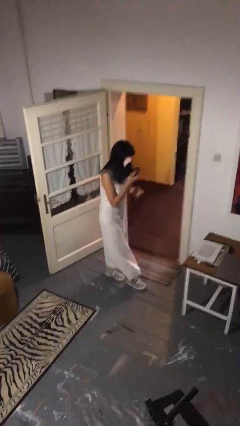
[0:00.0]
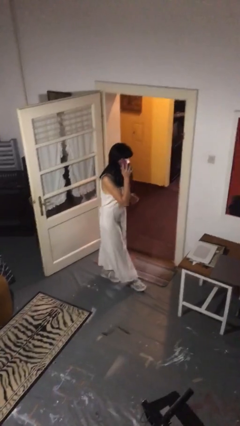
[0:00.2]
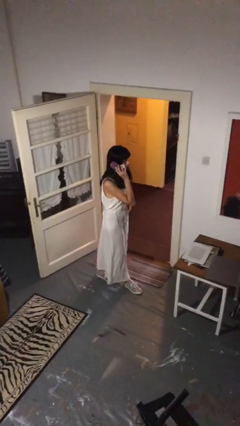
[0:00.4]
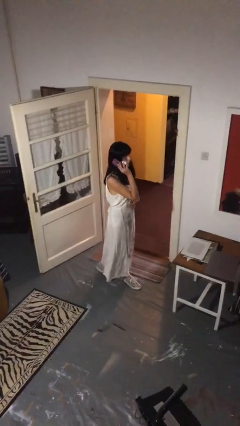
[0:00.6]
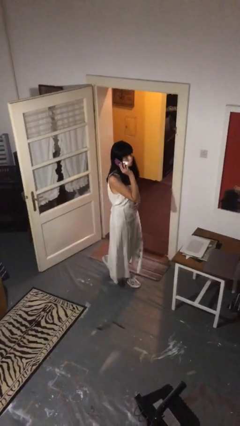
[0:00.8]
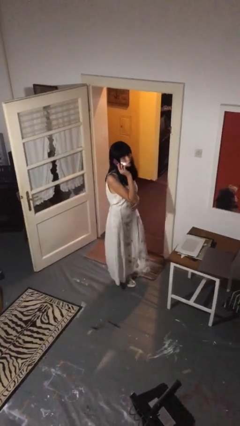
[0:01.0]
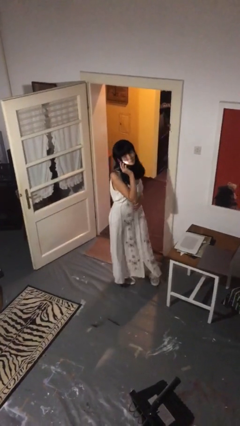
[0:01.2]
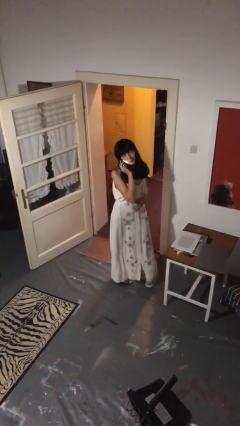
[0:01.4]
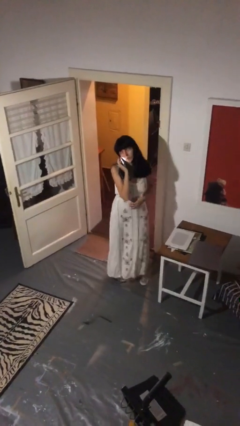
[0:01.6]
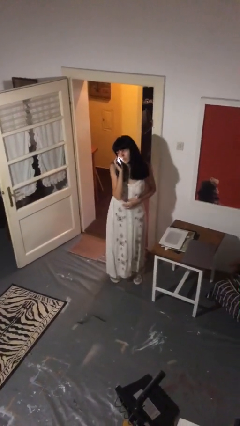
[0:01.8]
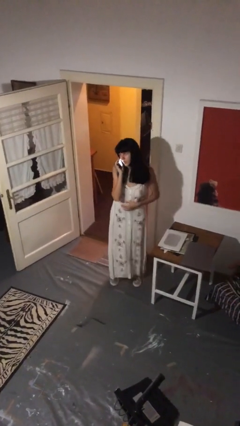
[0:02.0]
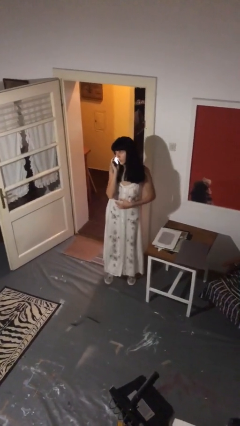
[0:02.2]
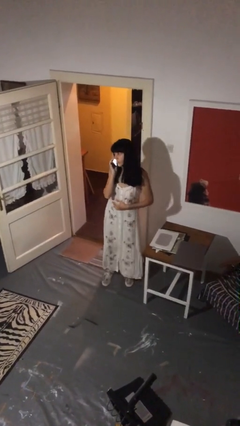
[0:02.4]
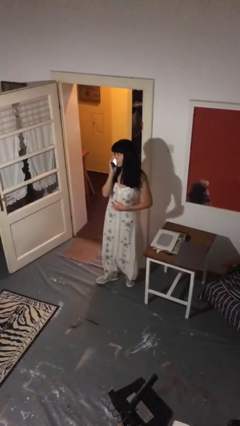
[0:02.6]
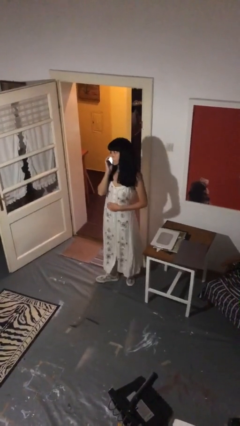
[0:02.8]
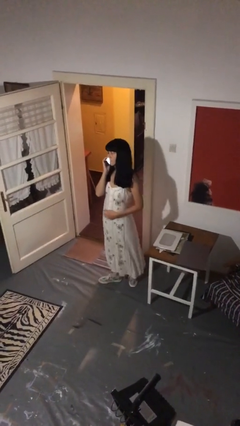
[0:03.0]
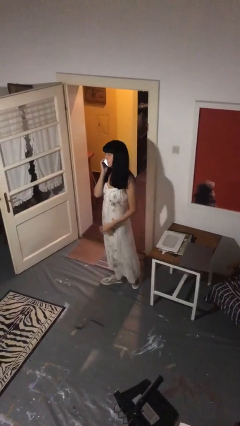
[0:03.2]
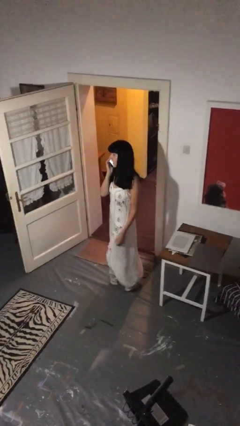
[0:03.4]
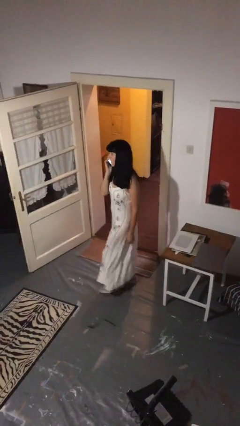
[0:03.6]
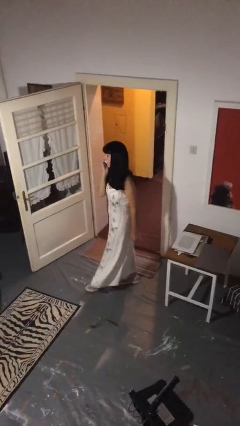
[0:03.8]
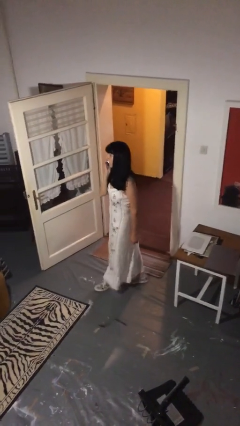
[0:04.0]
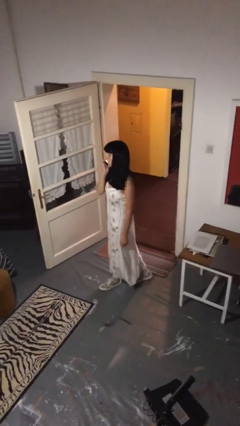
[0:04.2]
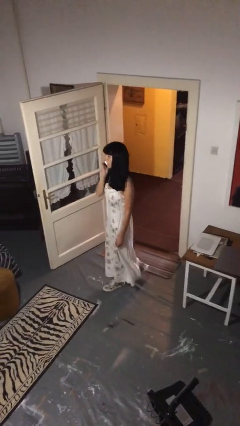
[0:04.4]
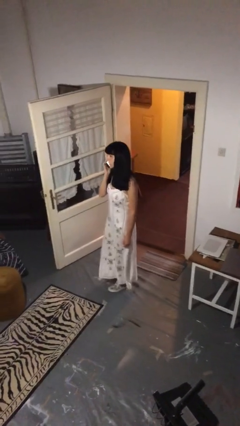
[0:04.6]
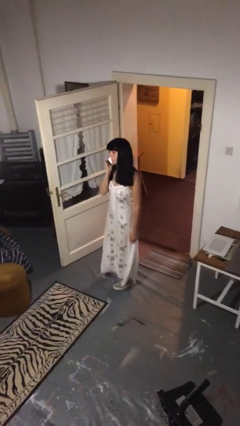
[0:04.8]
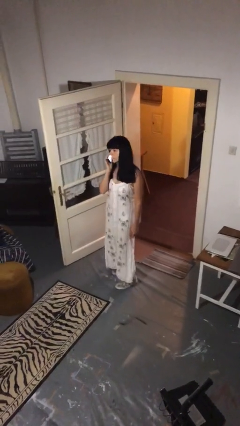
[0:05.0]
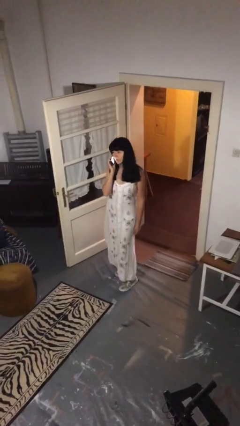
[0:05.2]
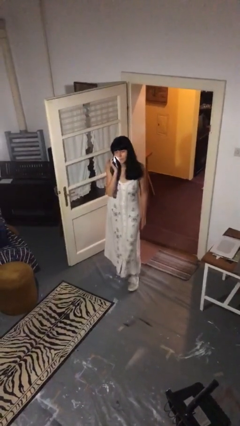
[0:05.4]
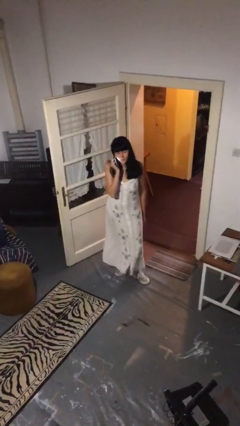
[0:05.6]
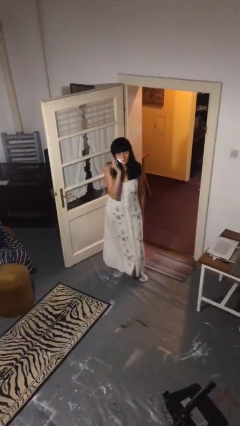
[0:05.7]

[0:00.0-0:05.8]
person talks on phone

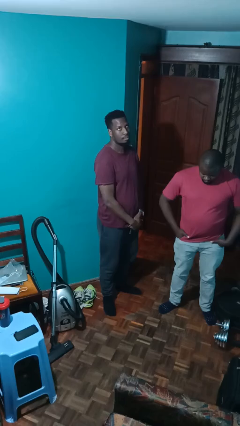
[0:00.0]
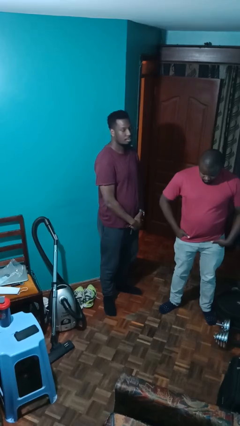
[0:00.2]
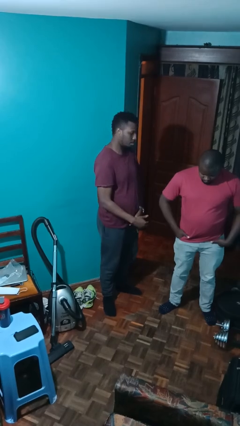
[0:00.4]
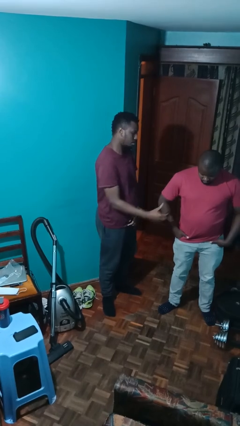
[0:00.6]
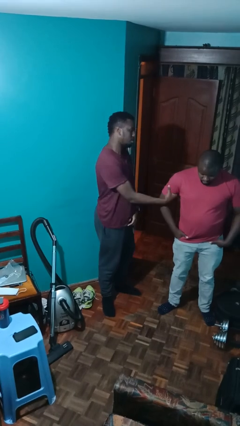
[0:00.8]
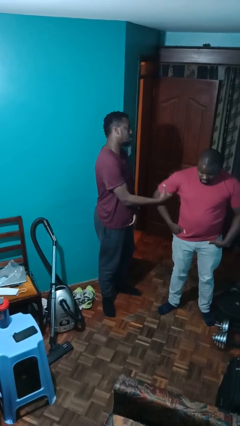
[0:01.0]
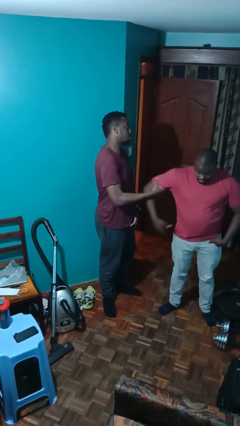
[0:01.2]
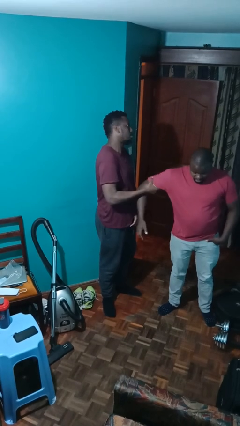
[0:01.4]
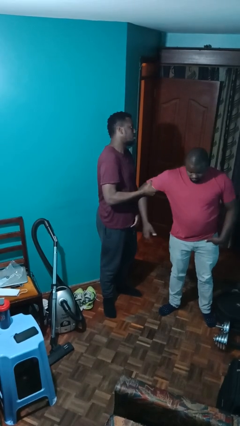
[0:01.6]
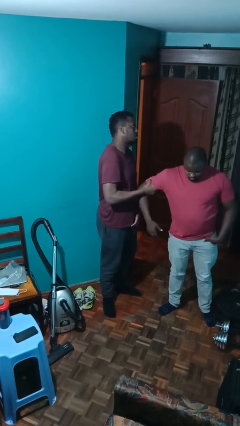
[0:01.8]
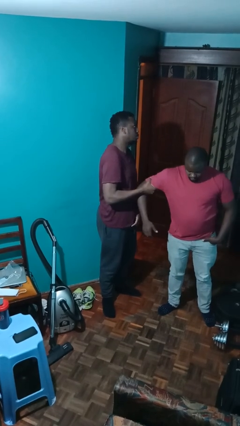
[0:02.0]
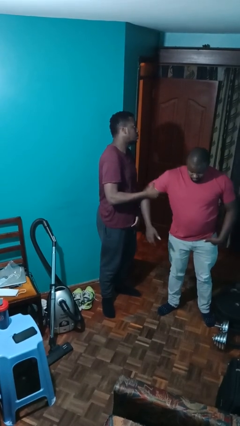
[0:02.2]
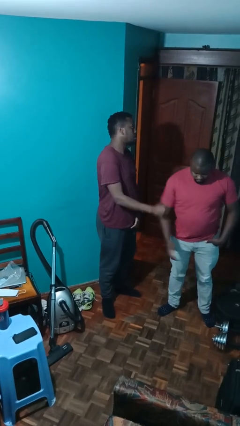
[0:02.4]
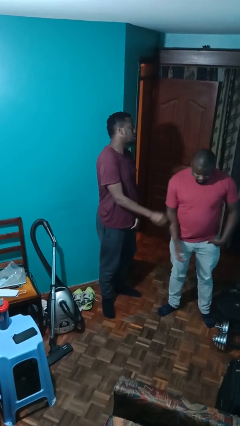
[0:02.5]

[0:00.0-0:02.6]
person grabs person by bicep

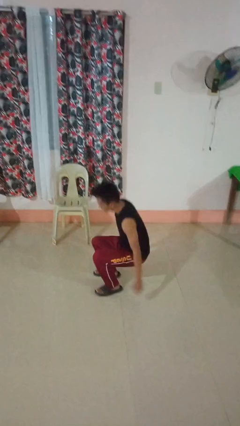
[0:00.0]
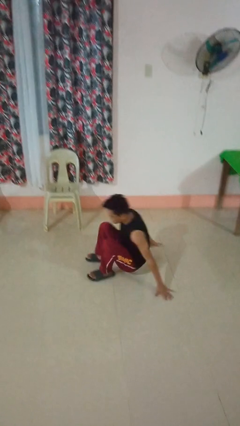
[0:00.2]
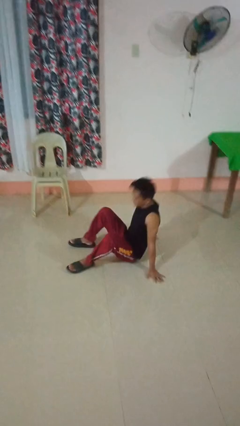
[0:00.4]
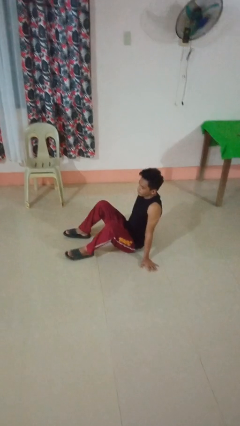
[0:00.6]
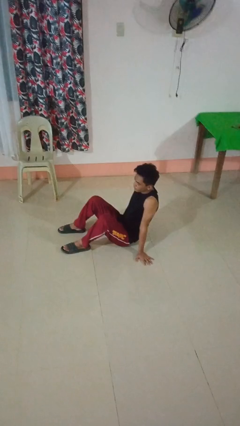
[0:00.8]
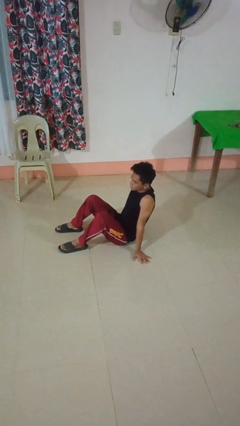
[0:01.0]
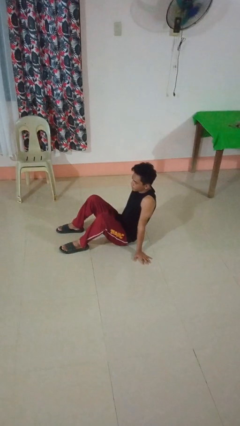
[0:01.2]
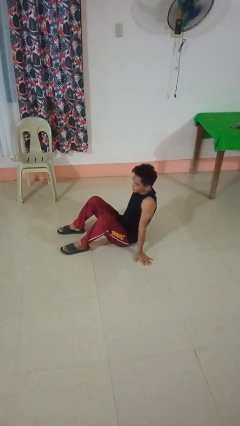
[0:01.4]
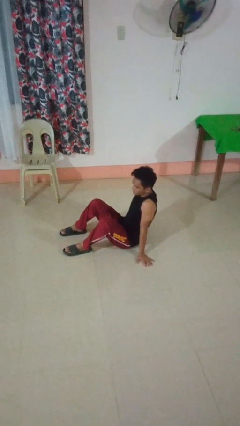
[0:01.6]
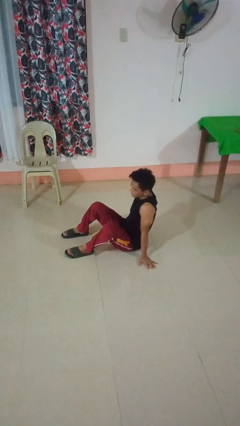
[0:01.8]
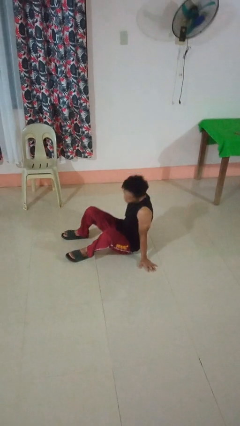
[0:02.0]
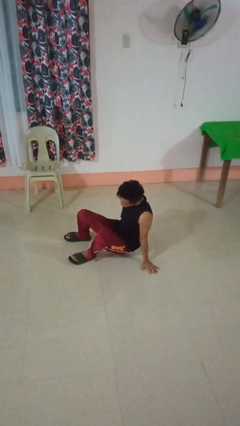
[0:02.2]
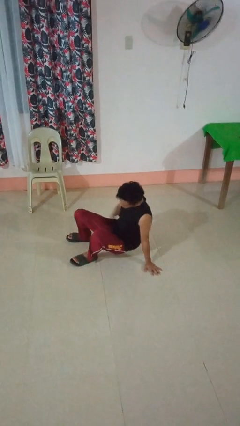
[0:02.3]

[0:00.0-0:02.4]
person falls while standing

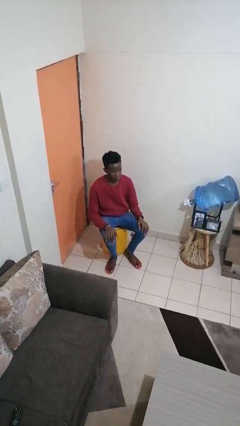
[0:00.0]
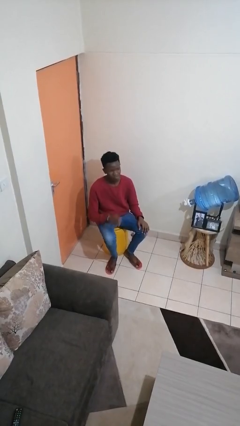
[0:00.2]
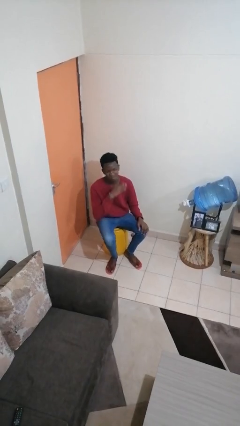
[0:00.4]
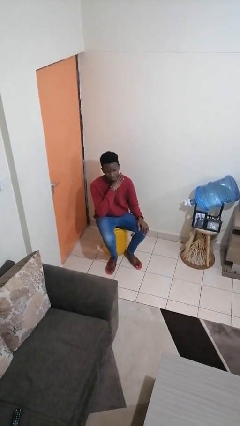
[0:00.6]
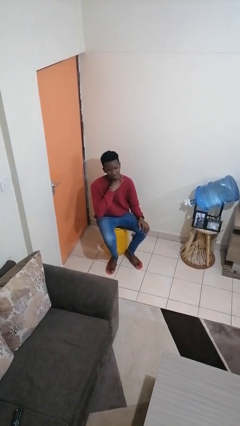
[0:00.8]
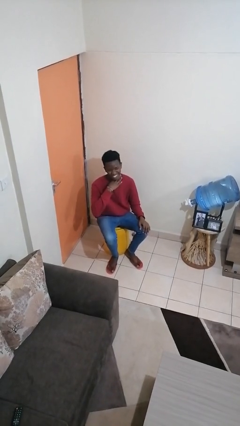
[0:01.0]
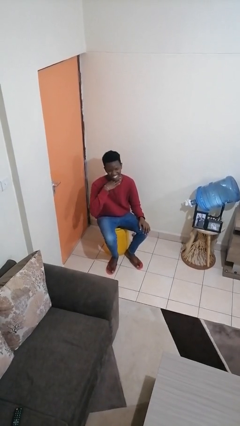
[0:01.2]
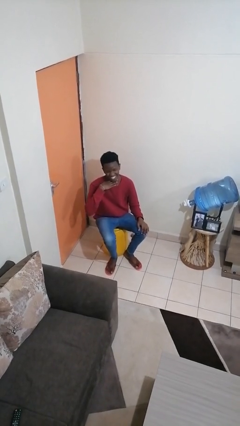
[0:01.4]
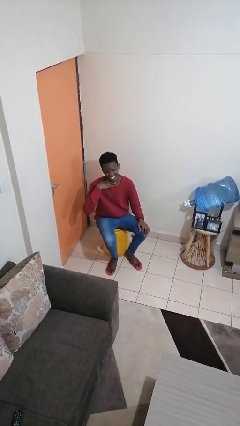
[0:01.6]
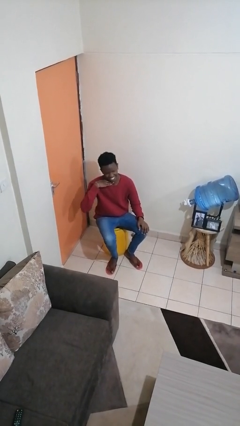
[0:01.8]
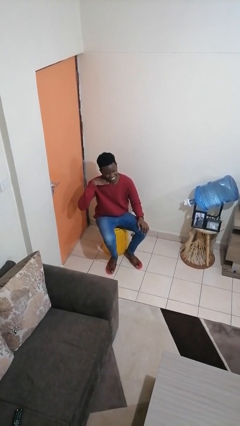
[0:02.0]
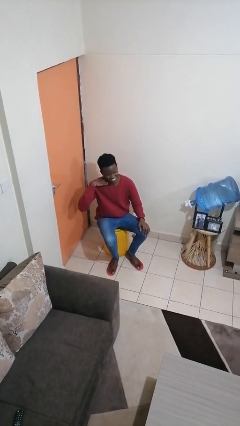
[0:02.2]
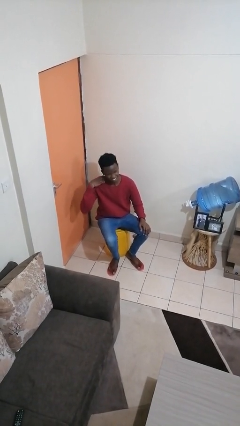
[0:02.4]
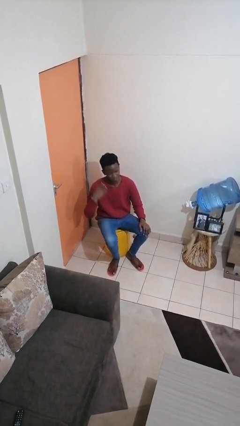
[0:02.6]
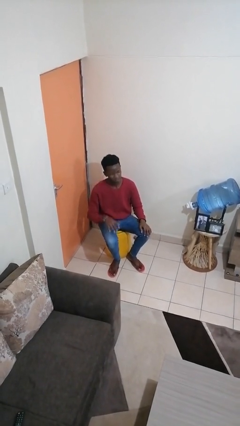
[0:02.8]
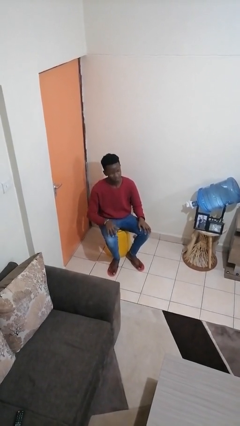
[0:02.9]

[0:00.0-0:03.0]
person gestures cut

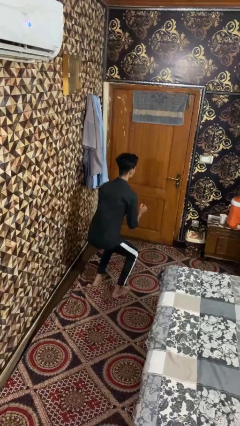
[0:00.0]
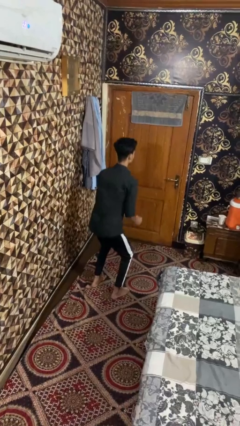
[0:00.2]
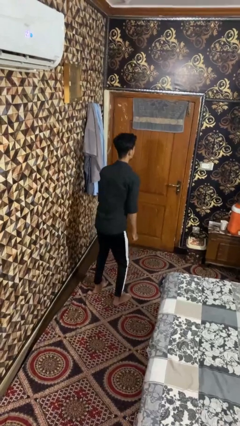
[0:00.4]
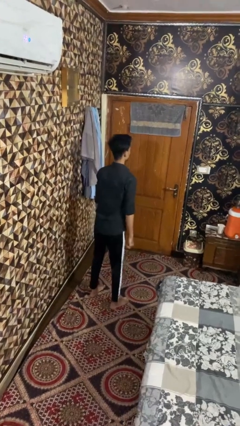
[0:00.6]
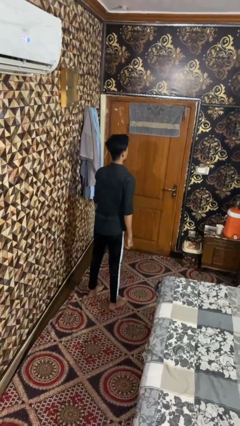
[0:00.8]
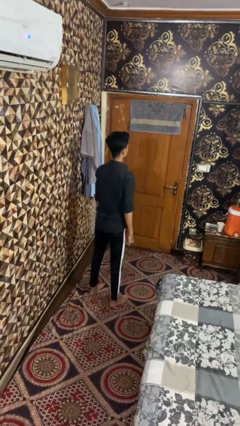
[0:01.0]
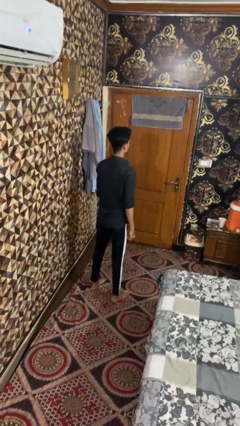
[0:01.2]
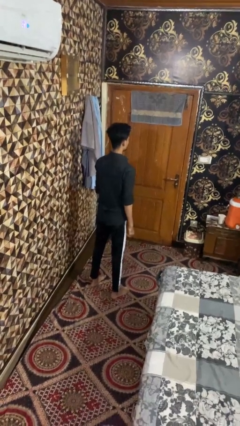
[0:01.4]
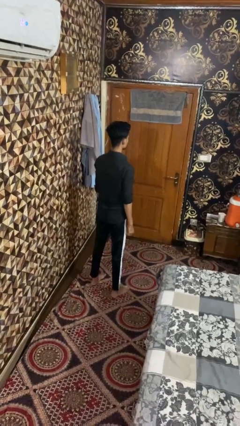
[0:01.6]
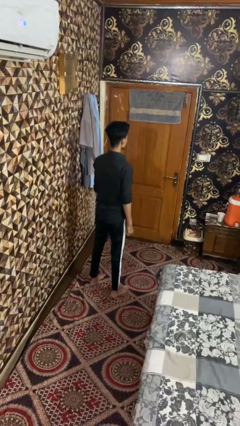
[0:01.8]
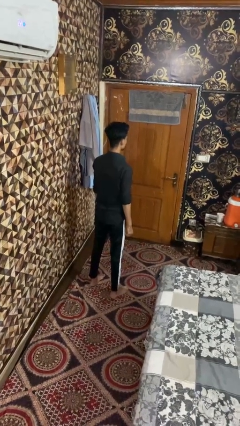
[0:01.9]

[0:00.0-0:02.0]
person stands up

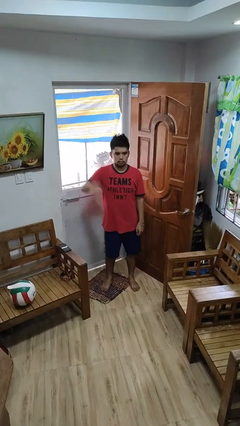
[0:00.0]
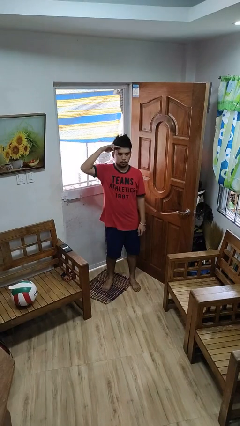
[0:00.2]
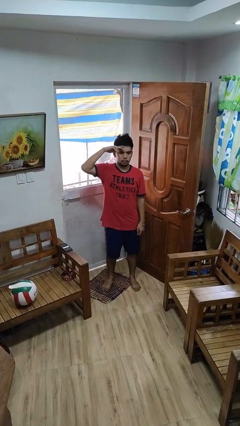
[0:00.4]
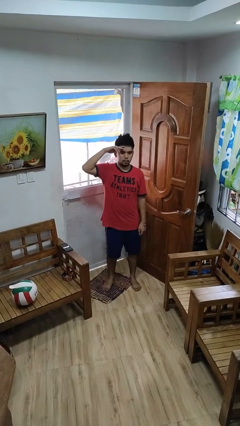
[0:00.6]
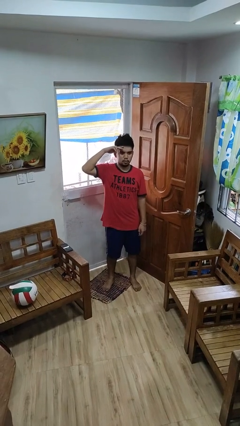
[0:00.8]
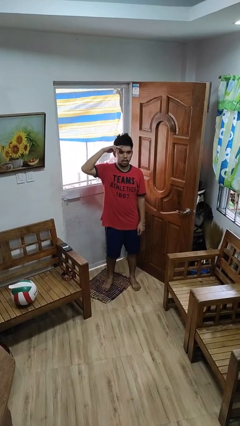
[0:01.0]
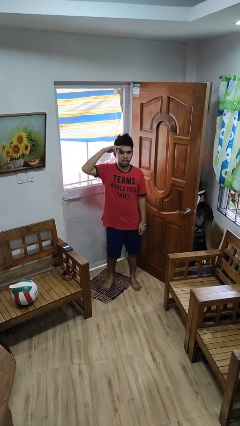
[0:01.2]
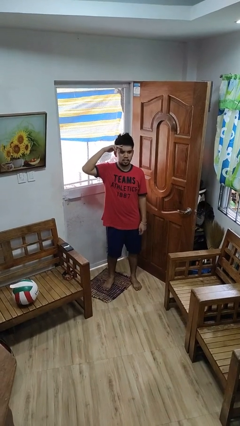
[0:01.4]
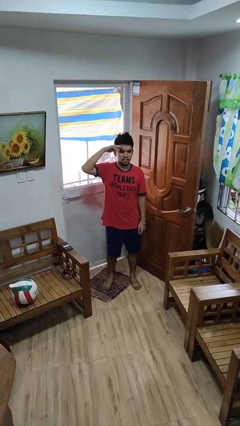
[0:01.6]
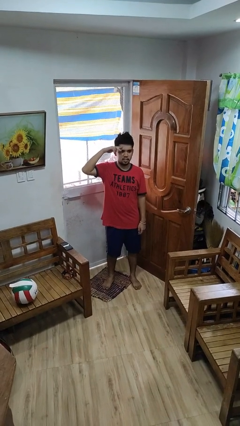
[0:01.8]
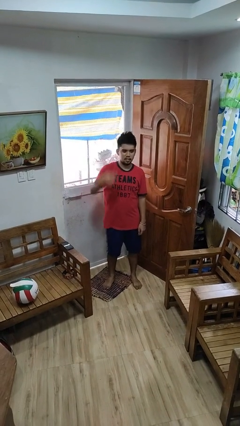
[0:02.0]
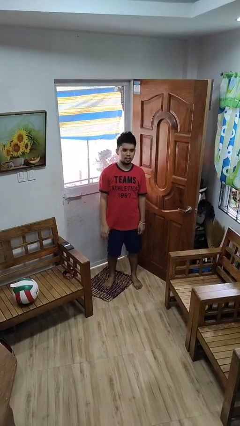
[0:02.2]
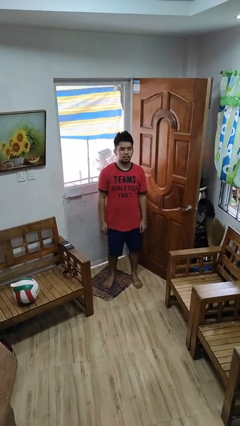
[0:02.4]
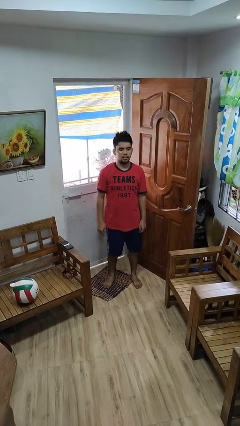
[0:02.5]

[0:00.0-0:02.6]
person salutes
